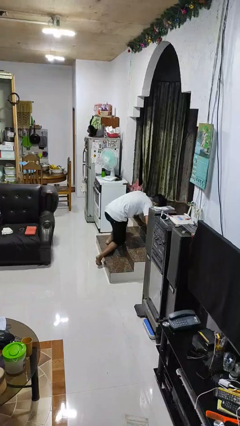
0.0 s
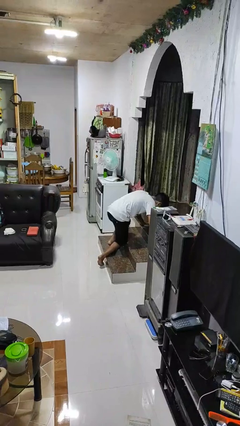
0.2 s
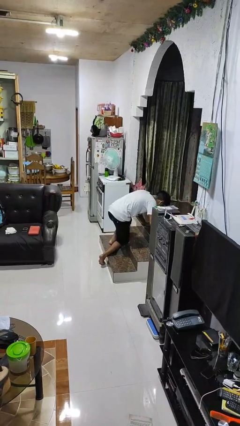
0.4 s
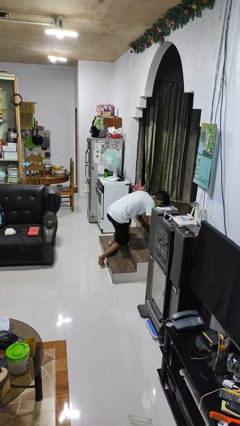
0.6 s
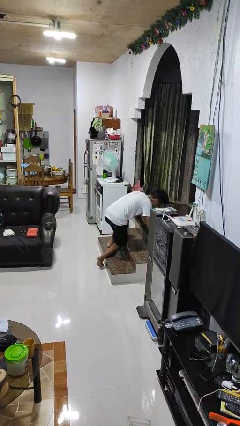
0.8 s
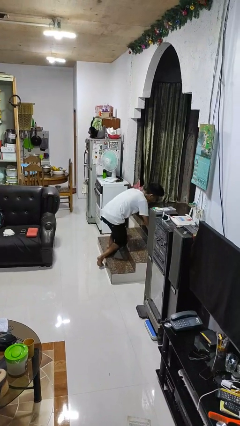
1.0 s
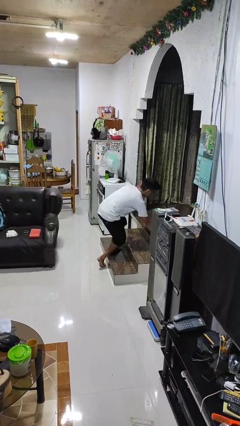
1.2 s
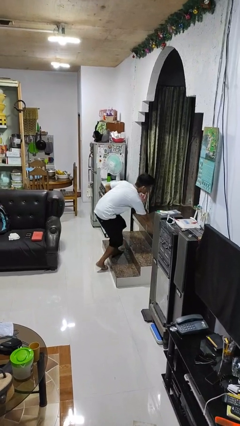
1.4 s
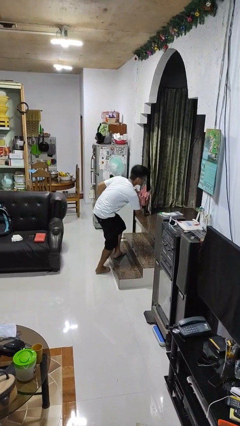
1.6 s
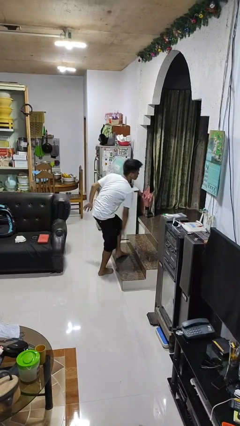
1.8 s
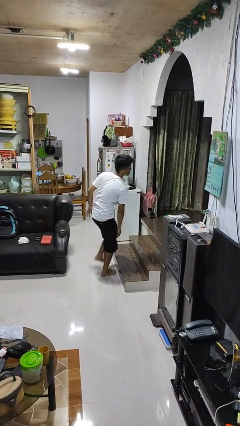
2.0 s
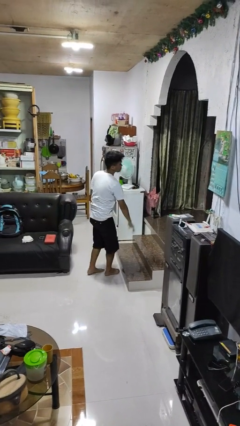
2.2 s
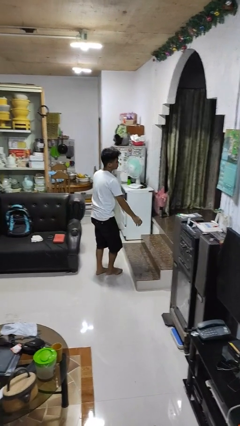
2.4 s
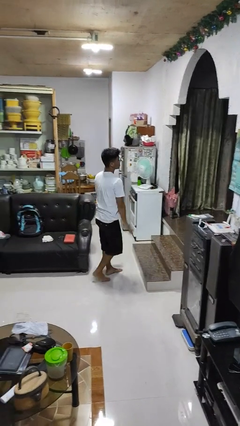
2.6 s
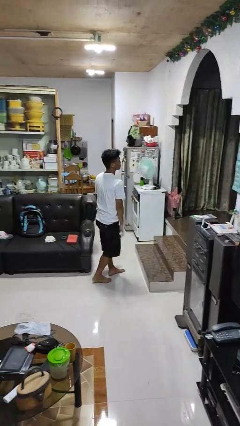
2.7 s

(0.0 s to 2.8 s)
person stands up from floor

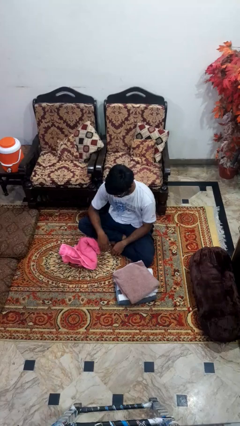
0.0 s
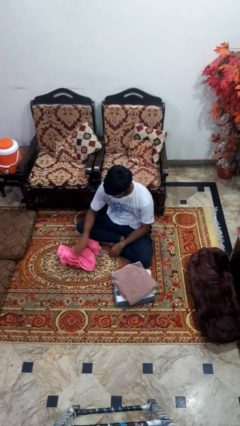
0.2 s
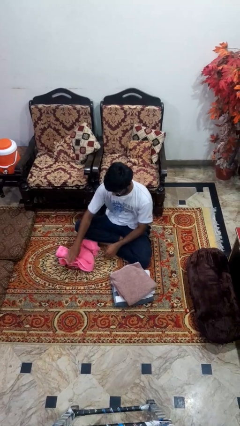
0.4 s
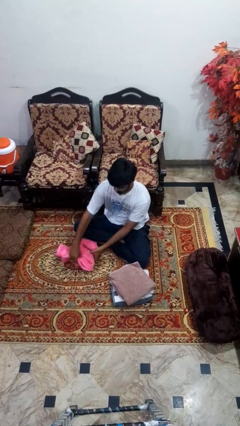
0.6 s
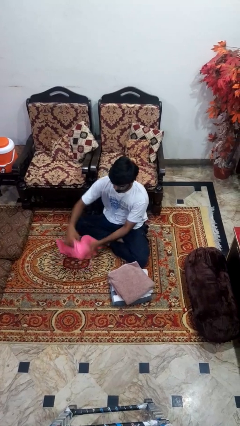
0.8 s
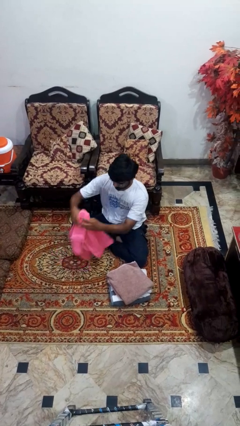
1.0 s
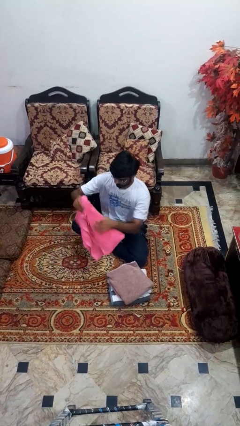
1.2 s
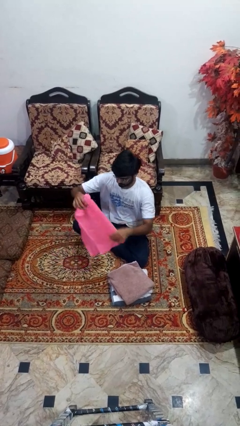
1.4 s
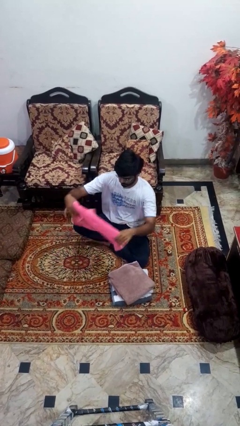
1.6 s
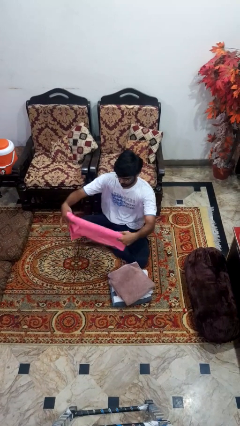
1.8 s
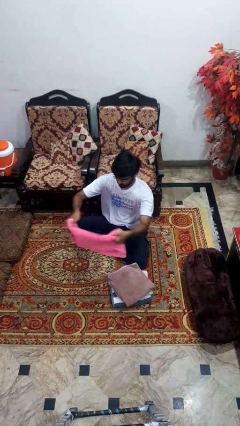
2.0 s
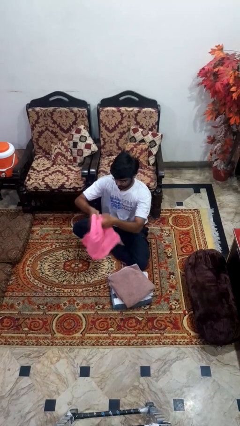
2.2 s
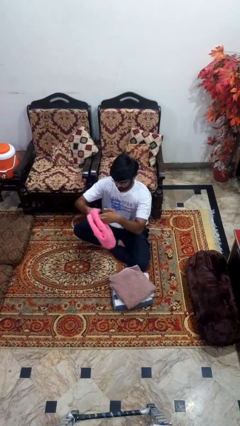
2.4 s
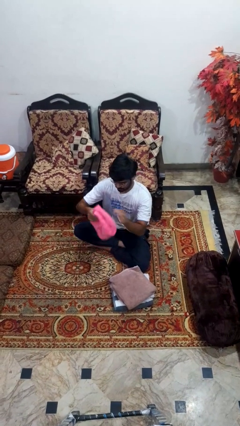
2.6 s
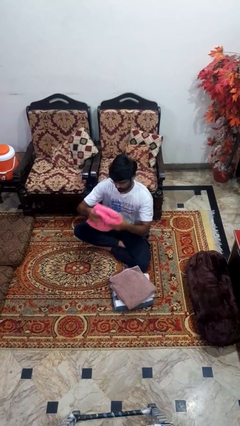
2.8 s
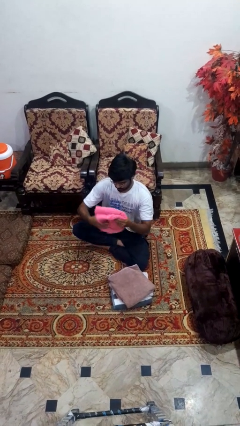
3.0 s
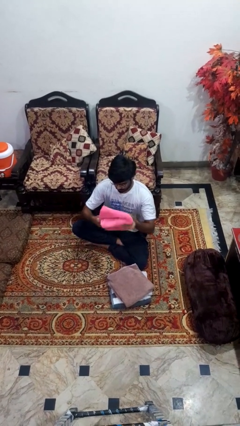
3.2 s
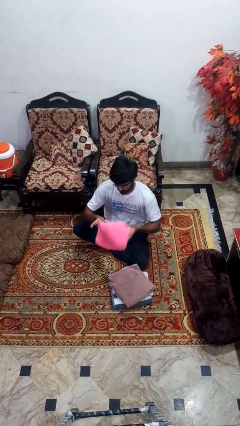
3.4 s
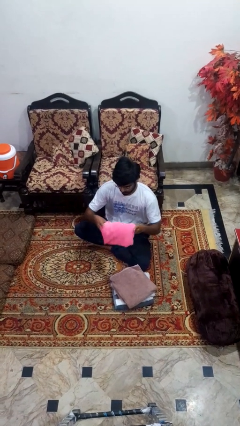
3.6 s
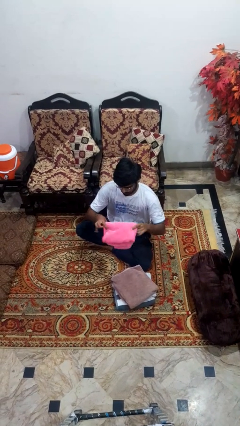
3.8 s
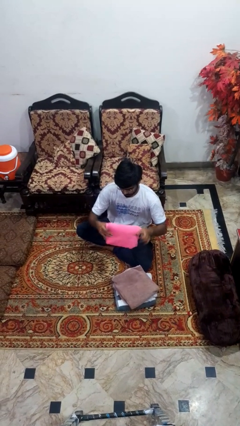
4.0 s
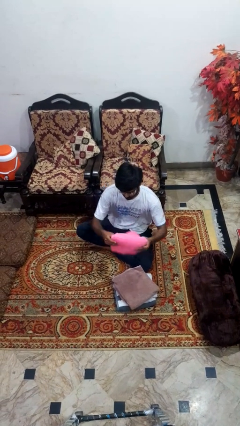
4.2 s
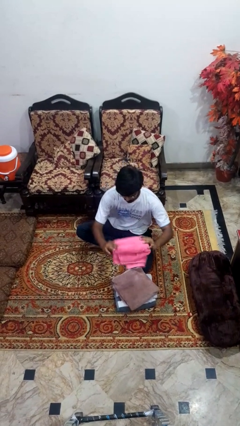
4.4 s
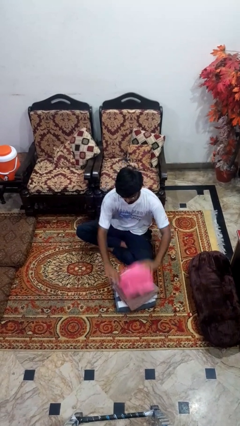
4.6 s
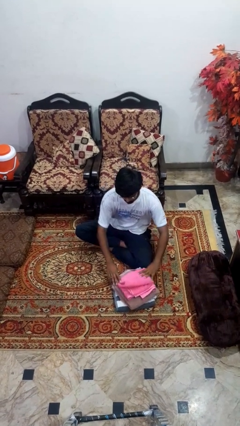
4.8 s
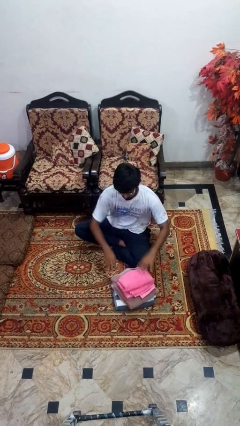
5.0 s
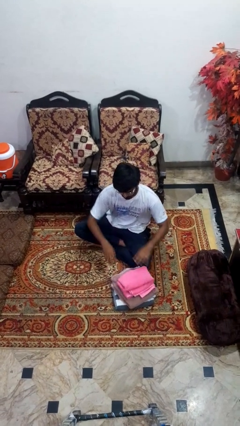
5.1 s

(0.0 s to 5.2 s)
person folds towel

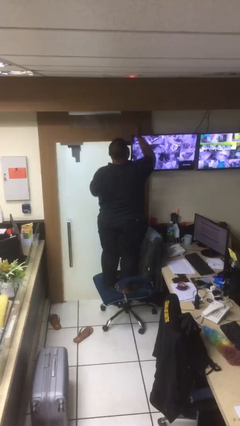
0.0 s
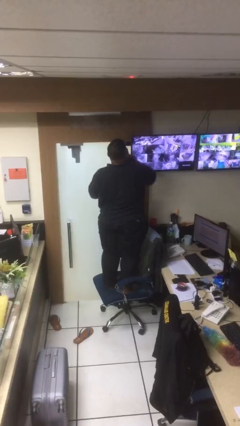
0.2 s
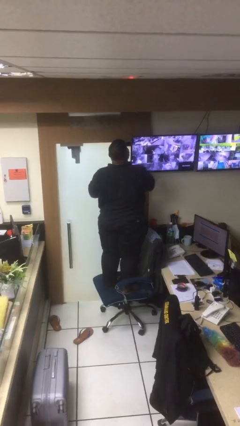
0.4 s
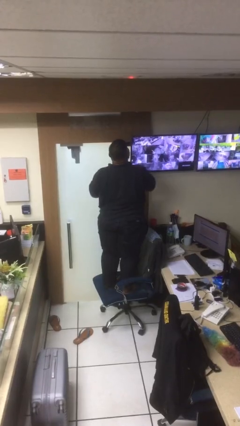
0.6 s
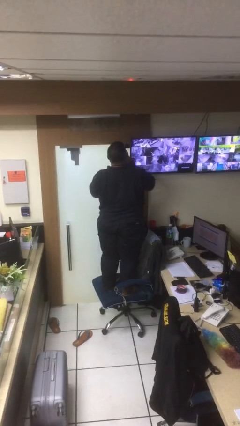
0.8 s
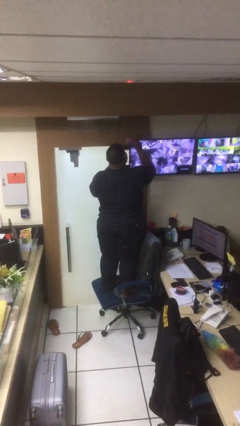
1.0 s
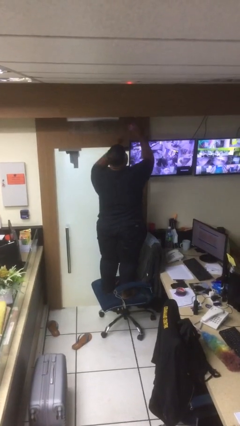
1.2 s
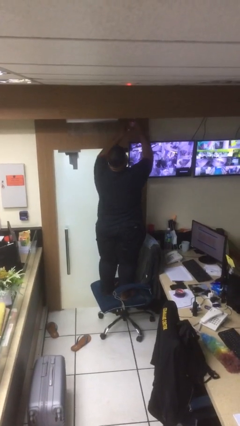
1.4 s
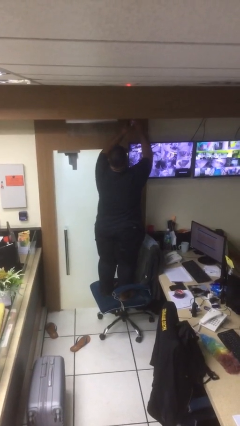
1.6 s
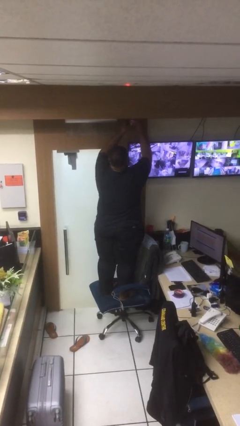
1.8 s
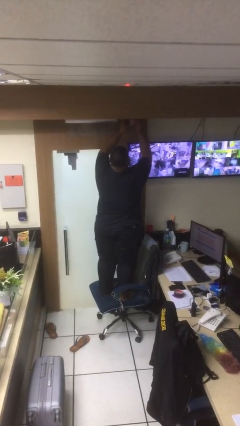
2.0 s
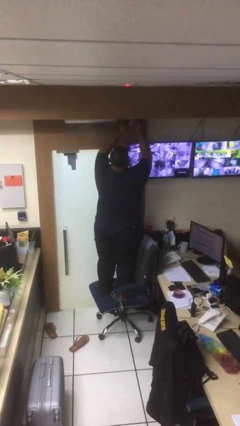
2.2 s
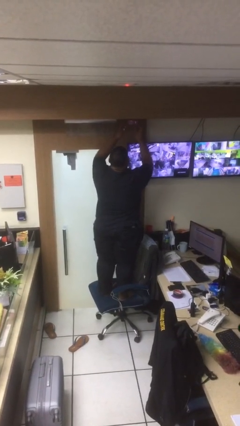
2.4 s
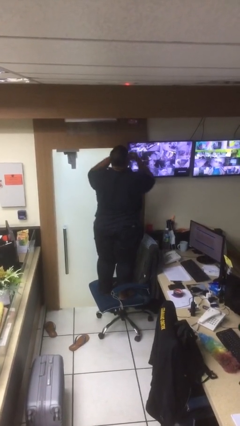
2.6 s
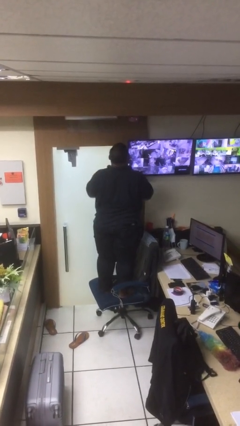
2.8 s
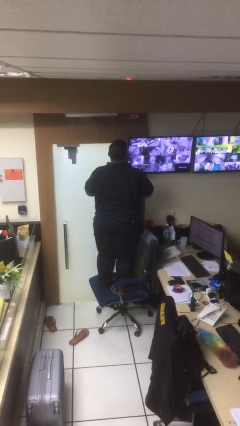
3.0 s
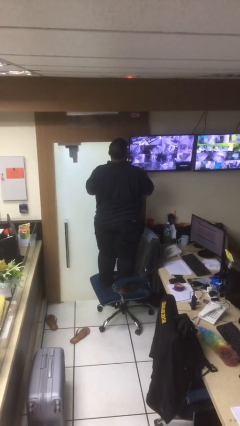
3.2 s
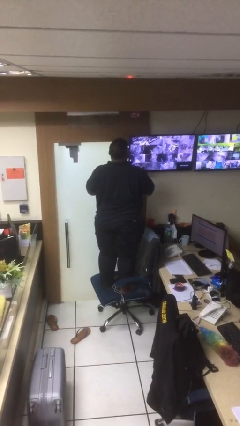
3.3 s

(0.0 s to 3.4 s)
person puts up smoke detector

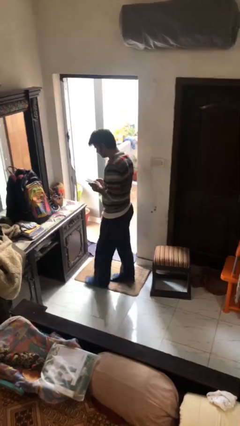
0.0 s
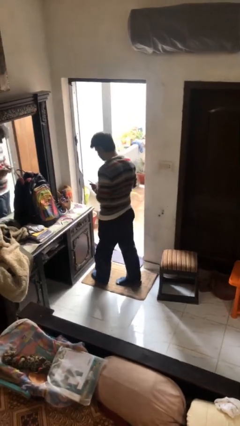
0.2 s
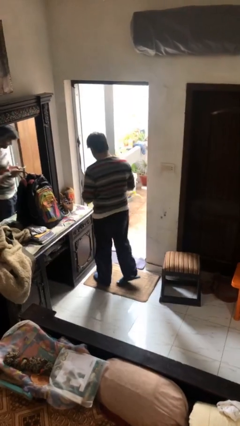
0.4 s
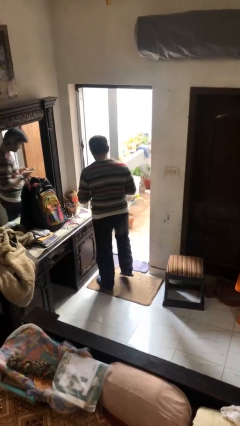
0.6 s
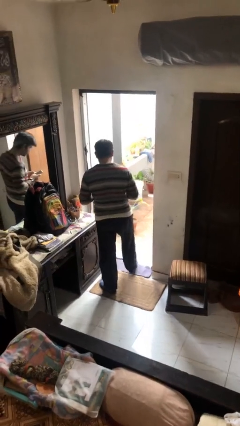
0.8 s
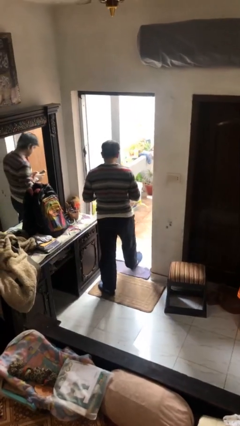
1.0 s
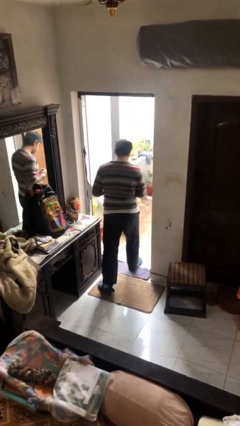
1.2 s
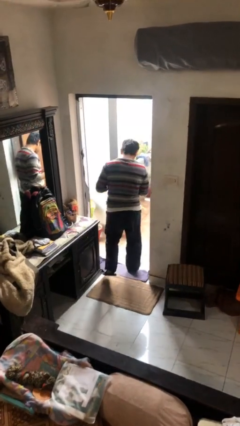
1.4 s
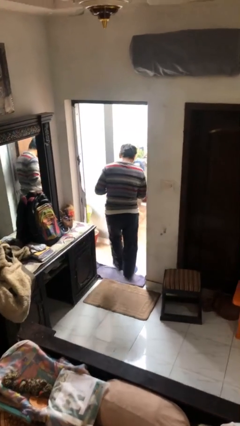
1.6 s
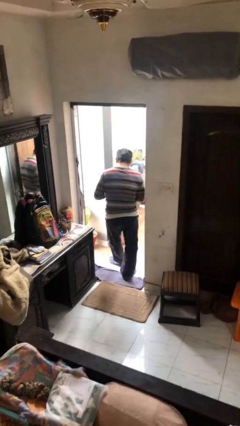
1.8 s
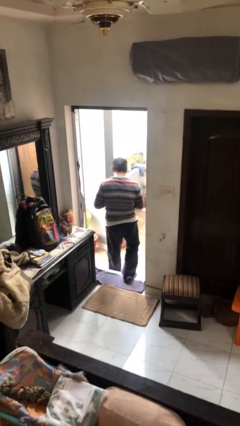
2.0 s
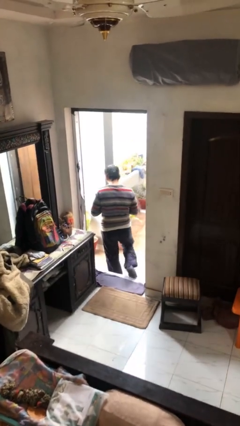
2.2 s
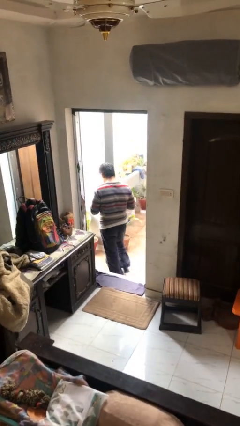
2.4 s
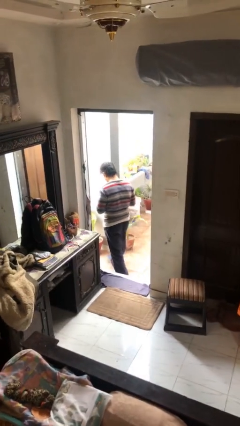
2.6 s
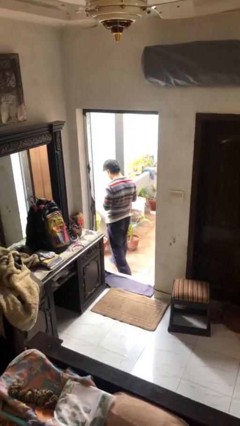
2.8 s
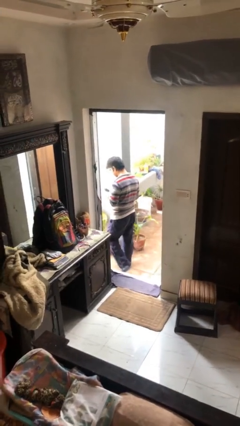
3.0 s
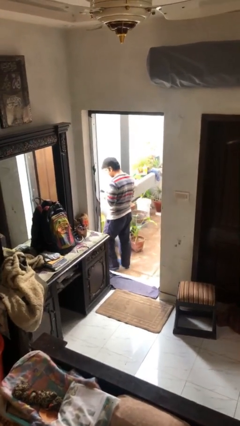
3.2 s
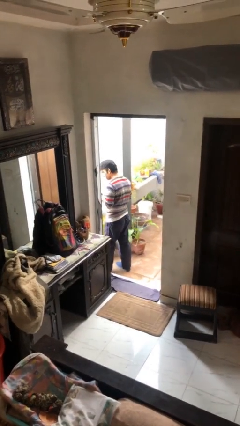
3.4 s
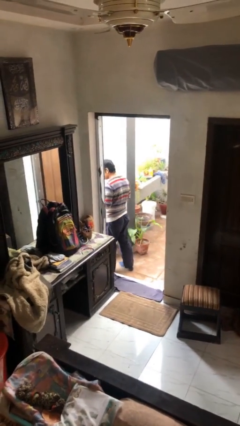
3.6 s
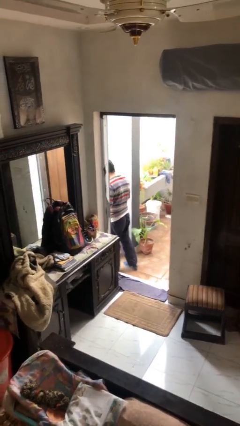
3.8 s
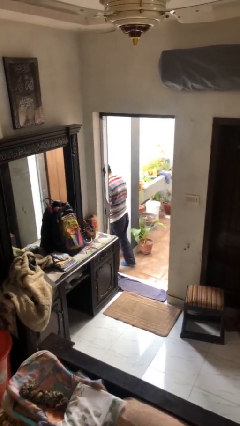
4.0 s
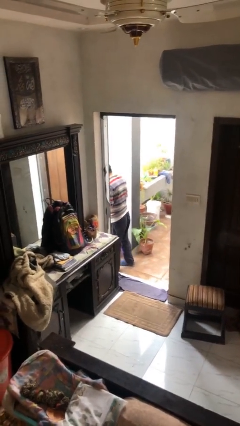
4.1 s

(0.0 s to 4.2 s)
person exits scene through structure

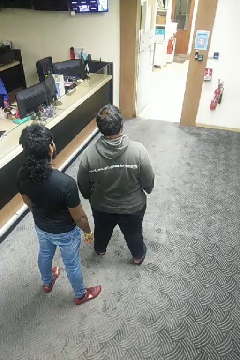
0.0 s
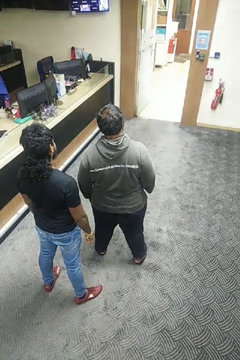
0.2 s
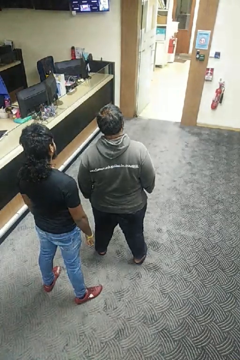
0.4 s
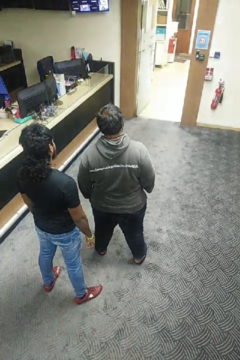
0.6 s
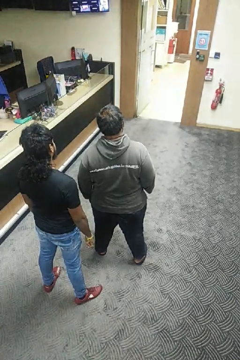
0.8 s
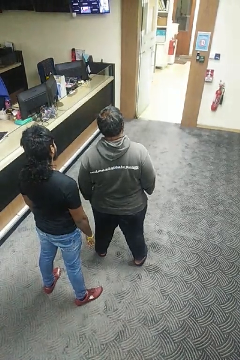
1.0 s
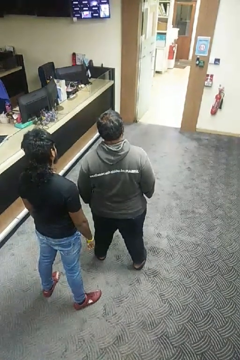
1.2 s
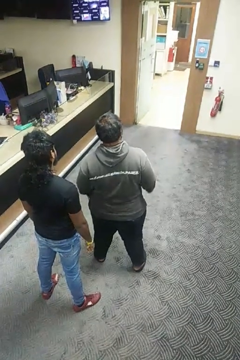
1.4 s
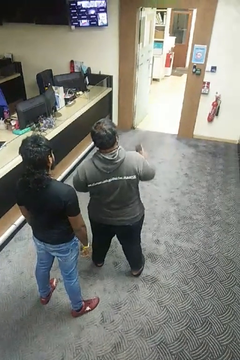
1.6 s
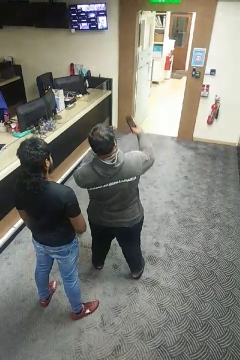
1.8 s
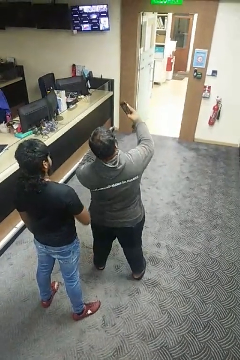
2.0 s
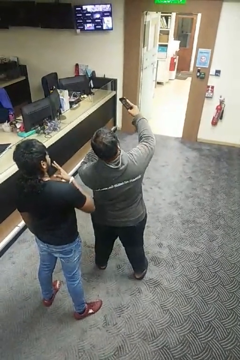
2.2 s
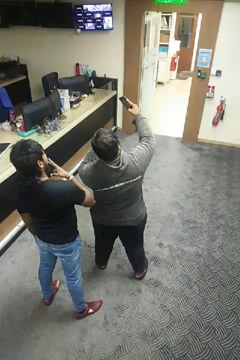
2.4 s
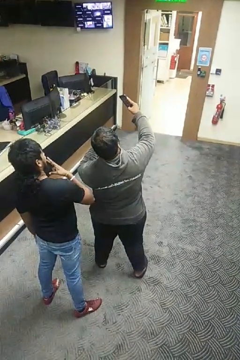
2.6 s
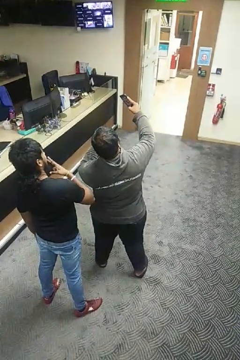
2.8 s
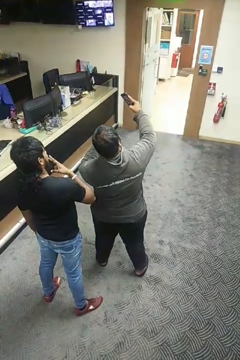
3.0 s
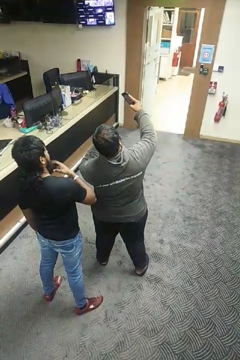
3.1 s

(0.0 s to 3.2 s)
person takes selfie with person
